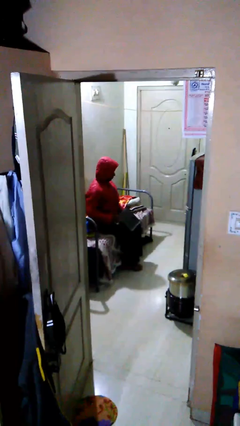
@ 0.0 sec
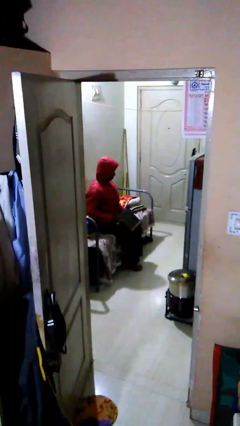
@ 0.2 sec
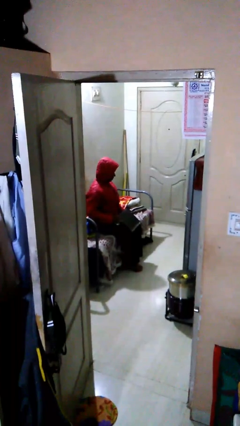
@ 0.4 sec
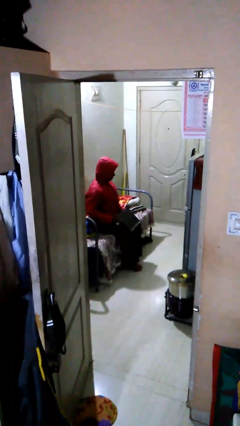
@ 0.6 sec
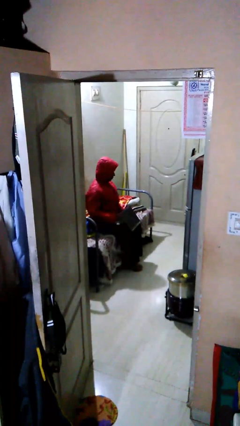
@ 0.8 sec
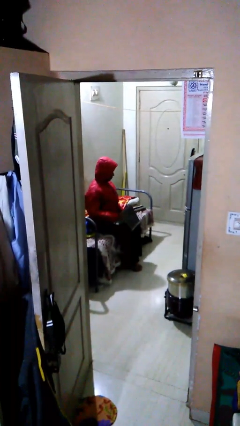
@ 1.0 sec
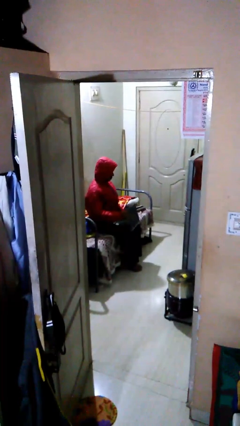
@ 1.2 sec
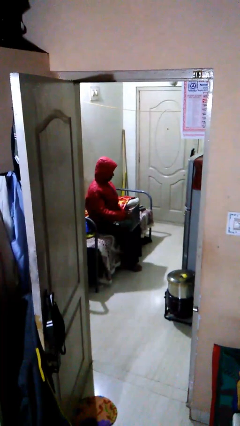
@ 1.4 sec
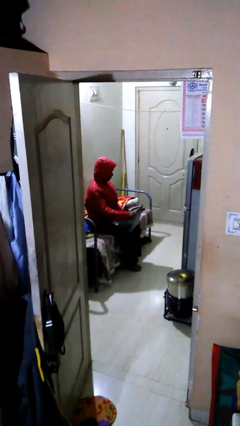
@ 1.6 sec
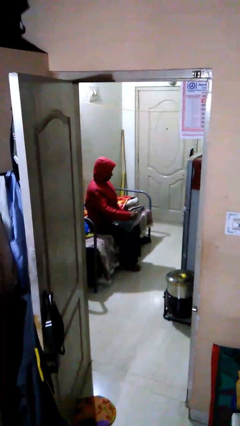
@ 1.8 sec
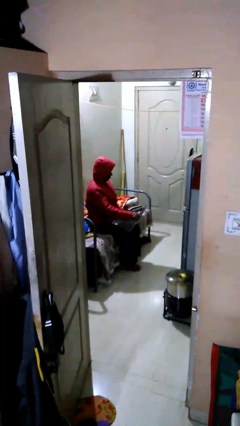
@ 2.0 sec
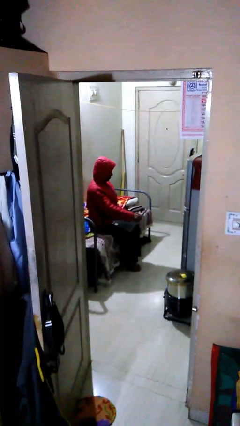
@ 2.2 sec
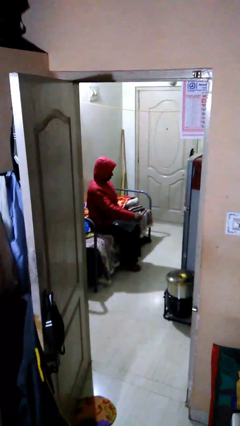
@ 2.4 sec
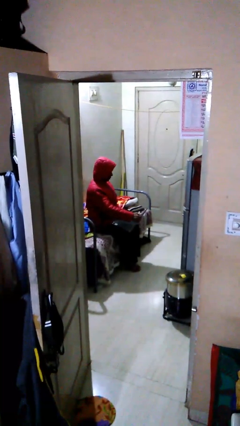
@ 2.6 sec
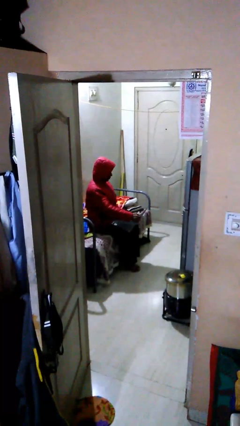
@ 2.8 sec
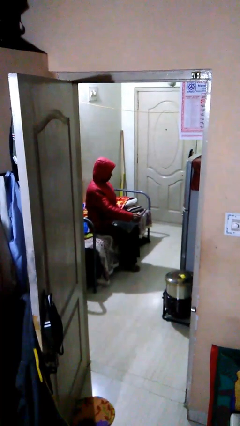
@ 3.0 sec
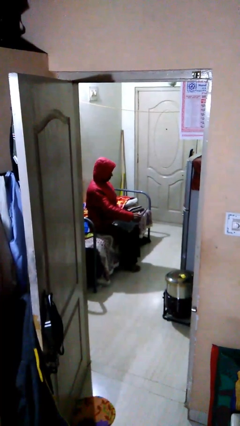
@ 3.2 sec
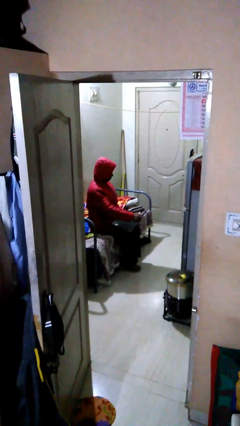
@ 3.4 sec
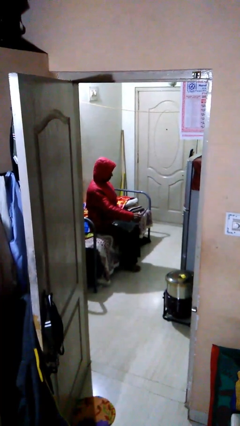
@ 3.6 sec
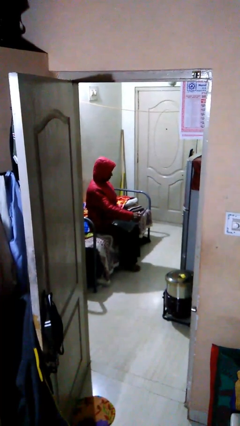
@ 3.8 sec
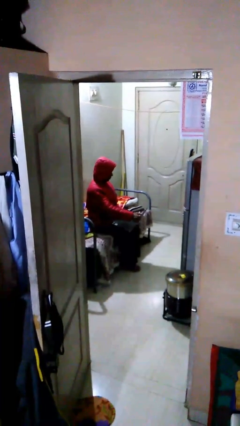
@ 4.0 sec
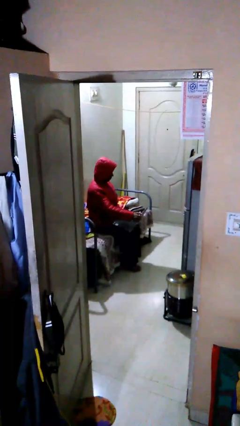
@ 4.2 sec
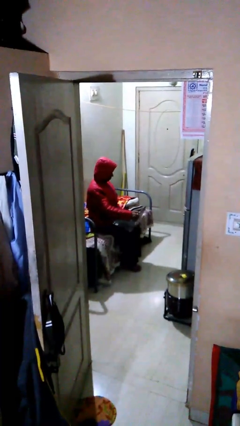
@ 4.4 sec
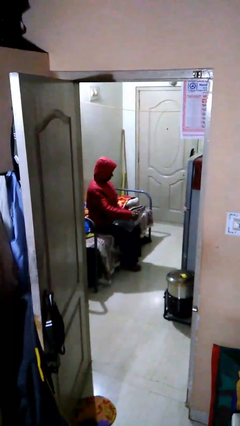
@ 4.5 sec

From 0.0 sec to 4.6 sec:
person interacts with laptop

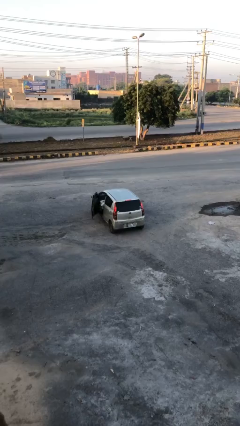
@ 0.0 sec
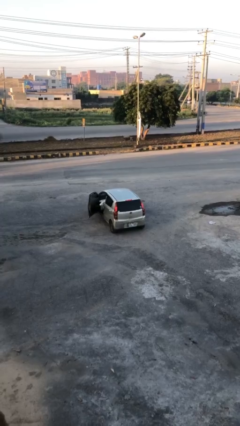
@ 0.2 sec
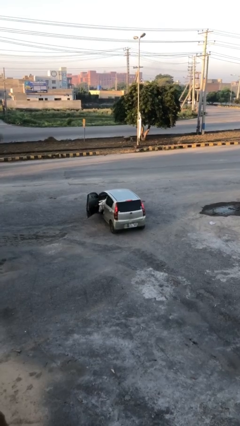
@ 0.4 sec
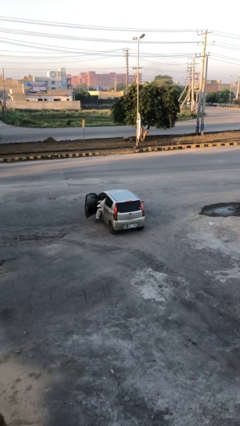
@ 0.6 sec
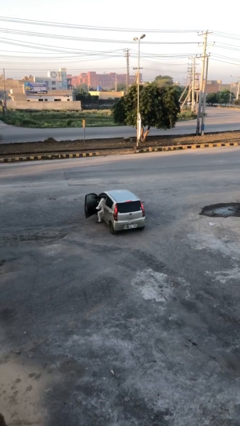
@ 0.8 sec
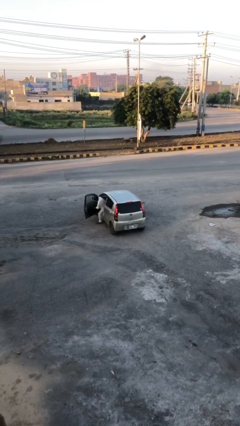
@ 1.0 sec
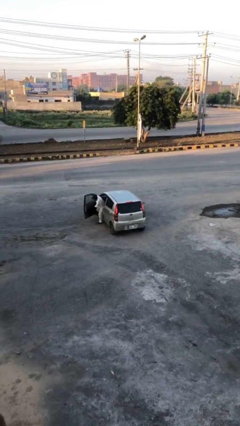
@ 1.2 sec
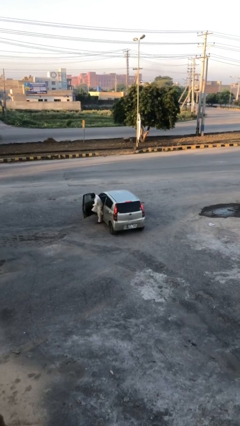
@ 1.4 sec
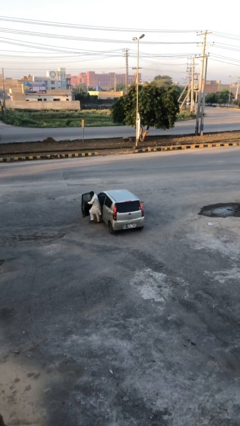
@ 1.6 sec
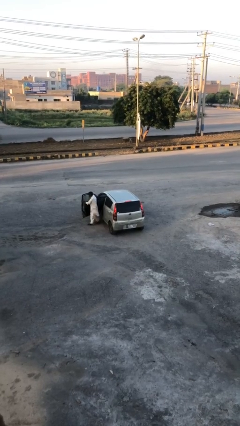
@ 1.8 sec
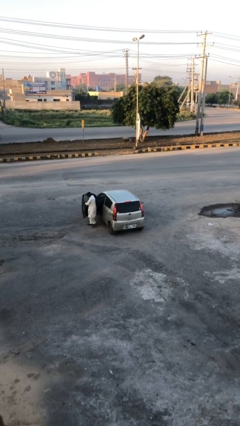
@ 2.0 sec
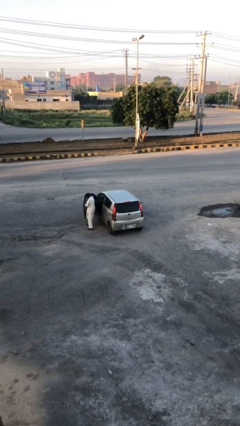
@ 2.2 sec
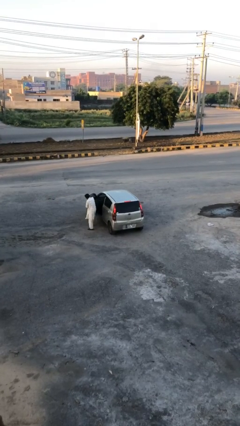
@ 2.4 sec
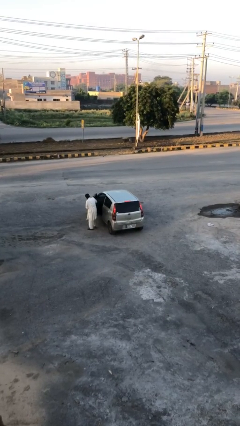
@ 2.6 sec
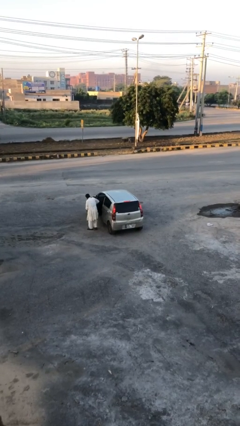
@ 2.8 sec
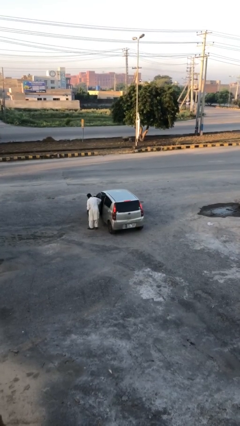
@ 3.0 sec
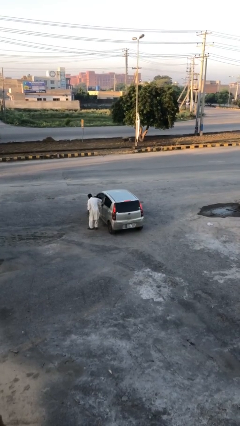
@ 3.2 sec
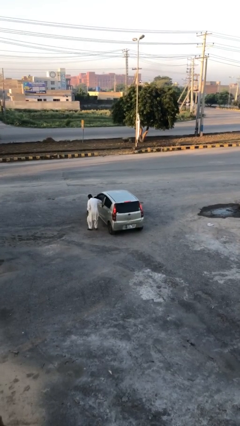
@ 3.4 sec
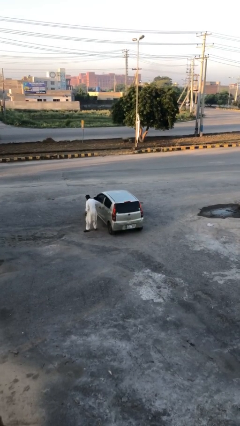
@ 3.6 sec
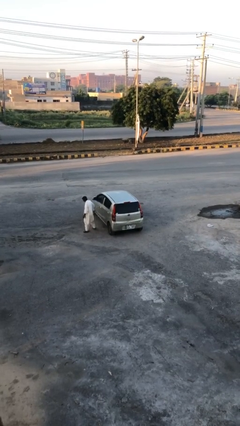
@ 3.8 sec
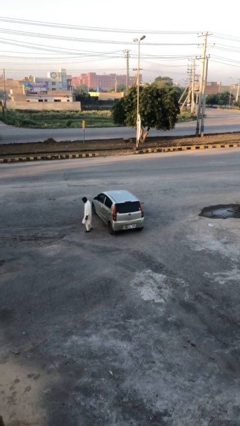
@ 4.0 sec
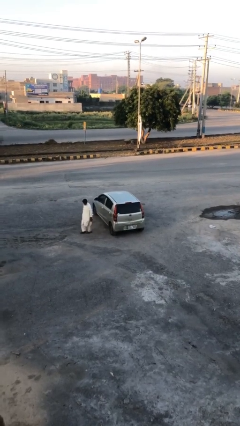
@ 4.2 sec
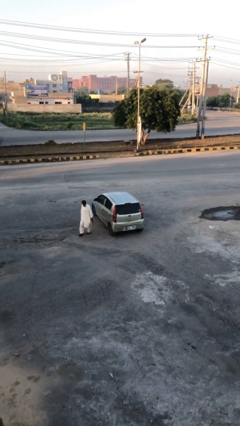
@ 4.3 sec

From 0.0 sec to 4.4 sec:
car drops off person

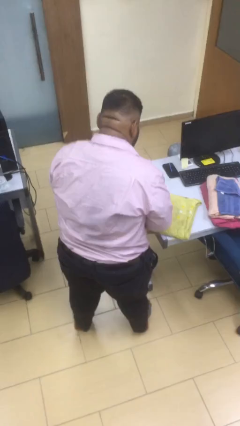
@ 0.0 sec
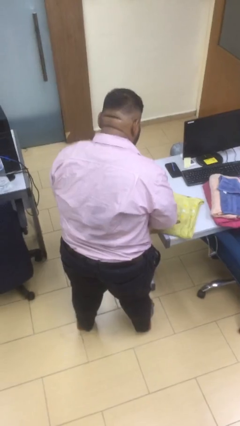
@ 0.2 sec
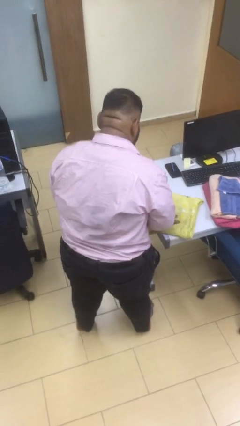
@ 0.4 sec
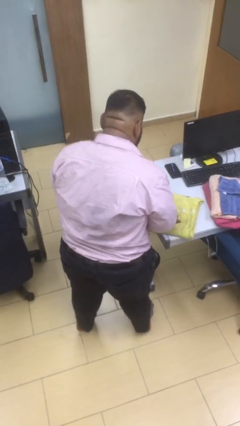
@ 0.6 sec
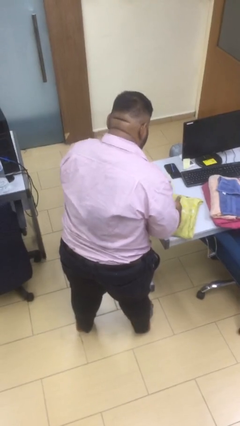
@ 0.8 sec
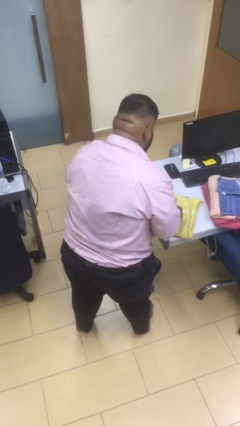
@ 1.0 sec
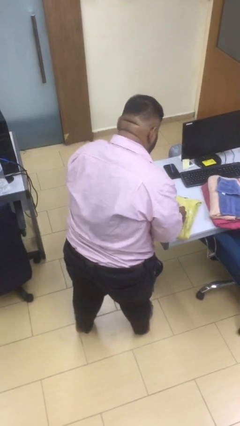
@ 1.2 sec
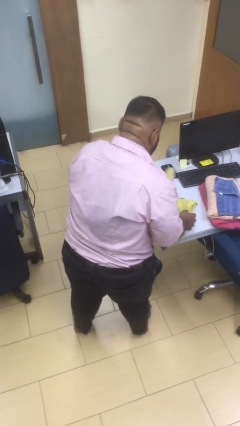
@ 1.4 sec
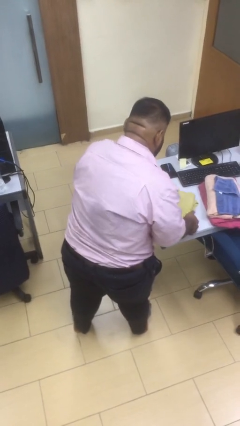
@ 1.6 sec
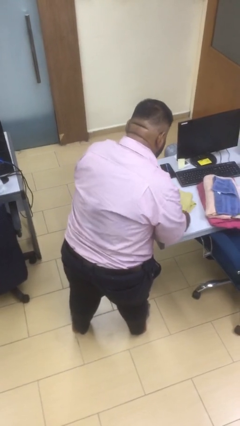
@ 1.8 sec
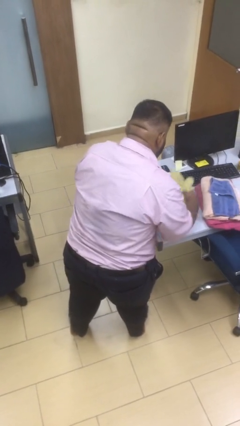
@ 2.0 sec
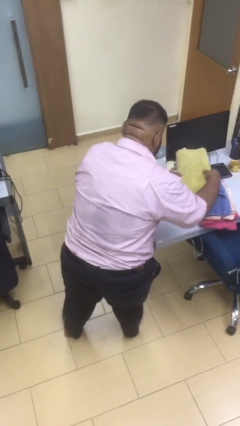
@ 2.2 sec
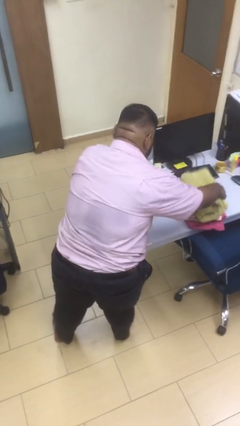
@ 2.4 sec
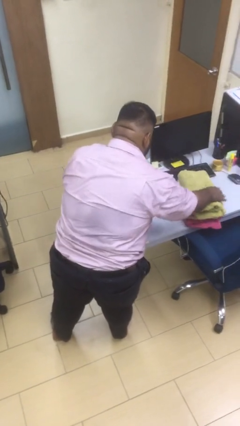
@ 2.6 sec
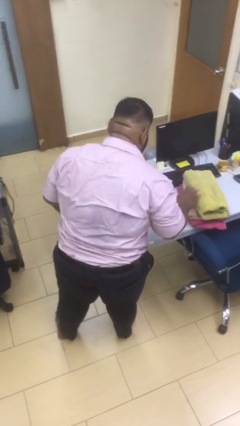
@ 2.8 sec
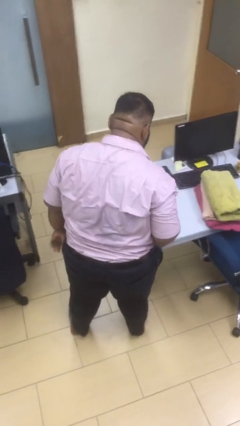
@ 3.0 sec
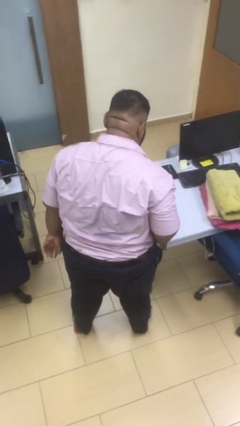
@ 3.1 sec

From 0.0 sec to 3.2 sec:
person folds towel

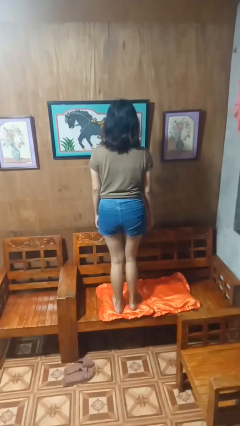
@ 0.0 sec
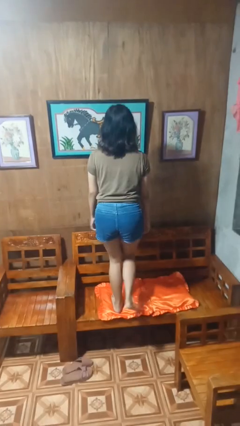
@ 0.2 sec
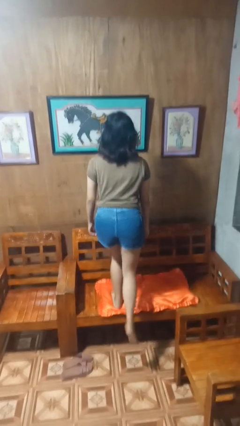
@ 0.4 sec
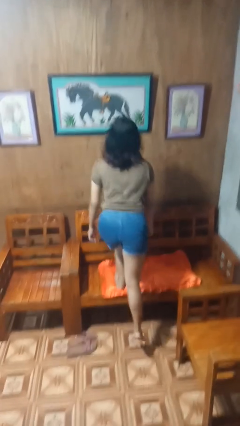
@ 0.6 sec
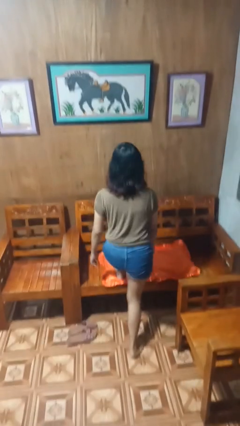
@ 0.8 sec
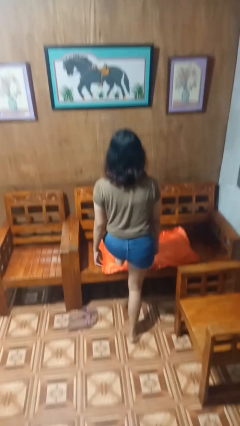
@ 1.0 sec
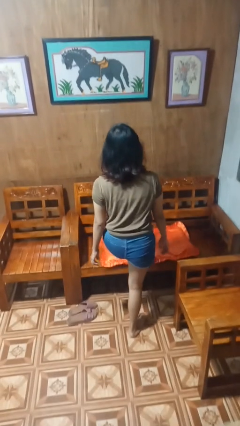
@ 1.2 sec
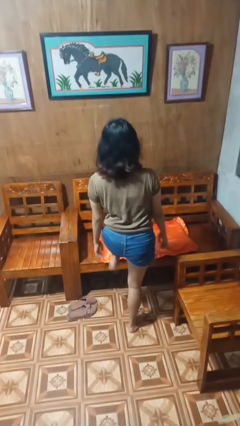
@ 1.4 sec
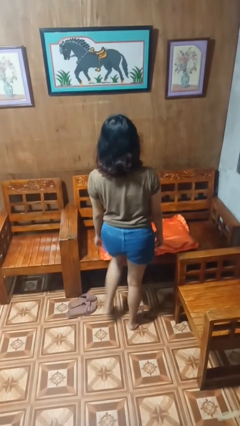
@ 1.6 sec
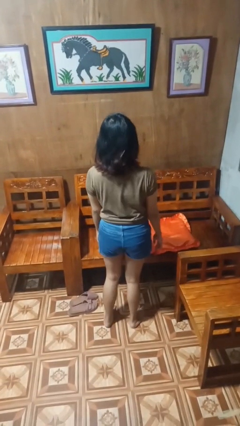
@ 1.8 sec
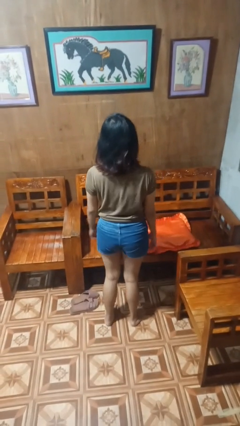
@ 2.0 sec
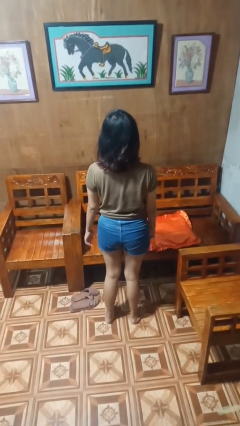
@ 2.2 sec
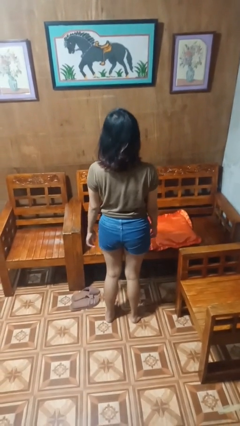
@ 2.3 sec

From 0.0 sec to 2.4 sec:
person climbs off couch

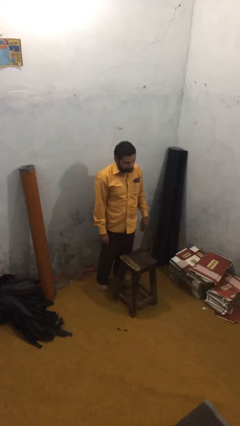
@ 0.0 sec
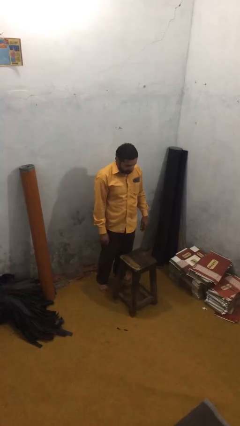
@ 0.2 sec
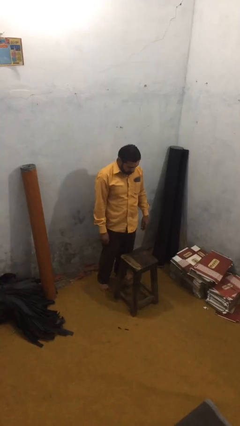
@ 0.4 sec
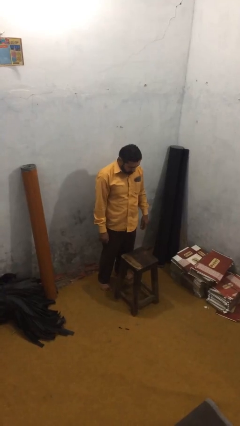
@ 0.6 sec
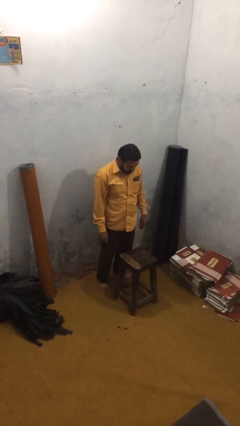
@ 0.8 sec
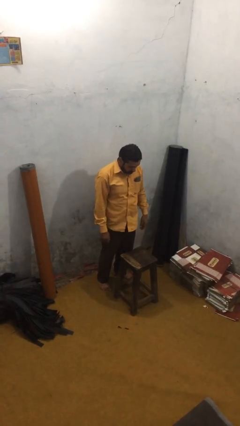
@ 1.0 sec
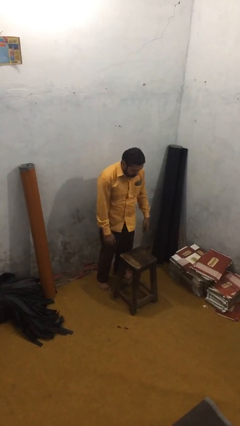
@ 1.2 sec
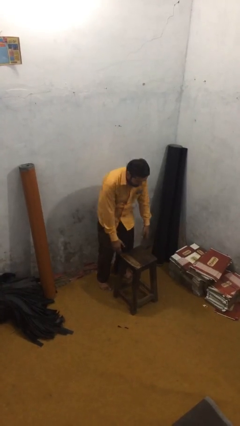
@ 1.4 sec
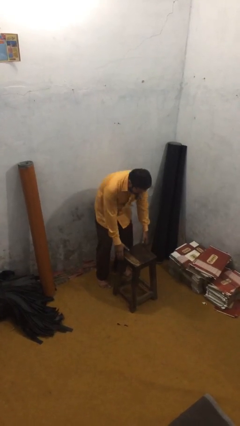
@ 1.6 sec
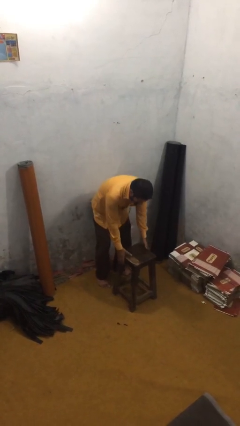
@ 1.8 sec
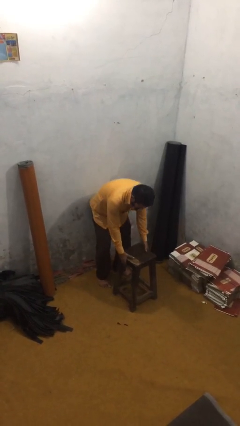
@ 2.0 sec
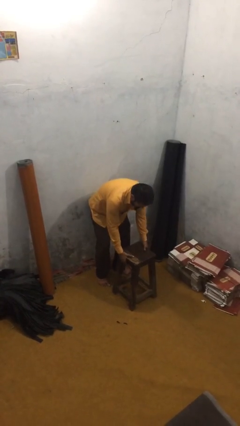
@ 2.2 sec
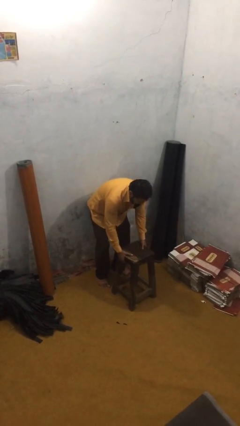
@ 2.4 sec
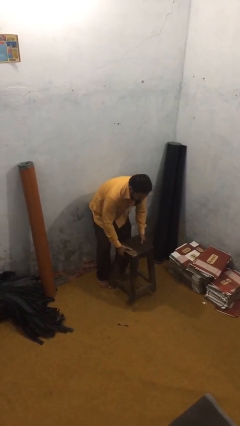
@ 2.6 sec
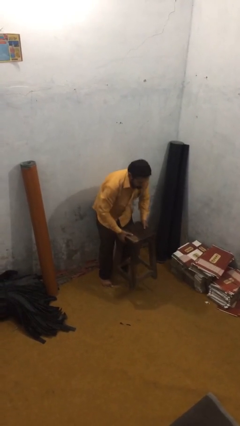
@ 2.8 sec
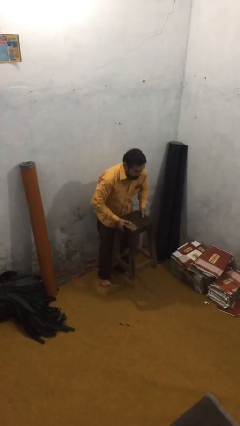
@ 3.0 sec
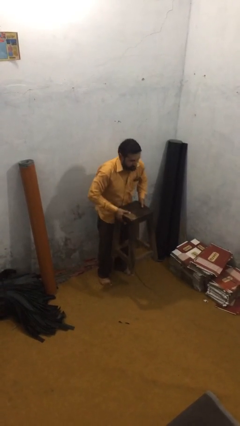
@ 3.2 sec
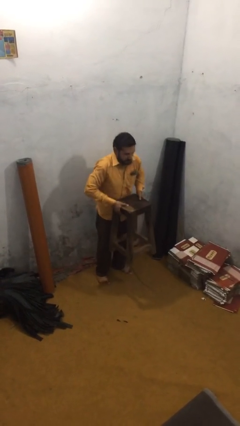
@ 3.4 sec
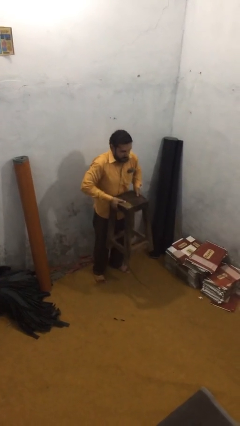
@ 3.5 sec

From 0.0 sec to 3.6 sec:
person picks up object from floor
